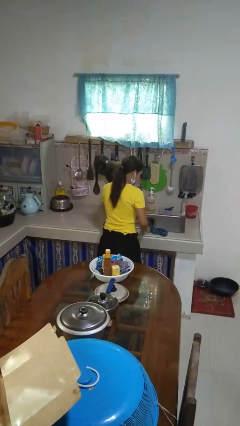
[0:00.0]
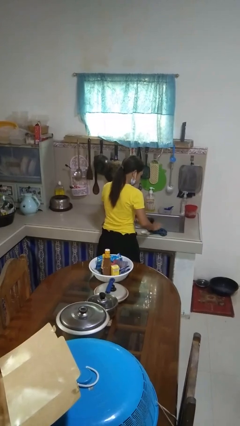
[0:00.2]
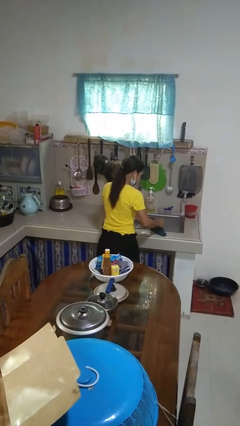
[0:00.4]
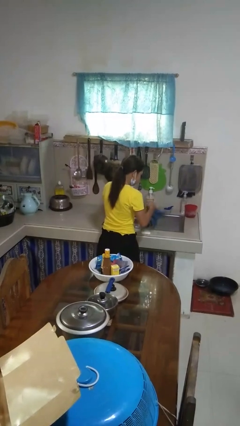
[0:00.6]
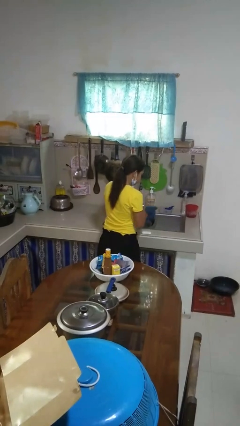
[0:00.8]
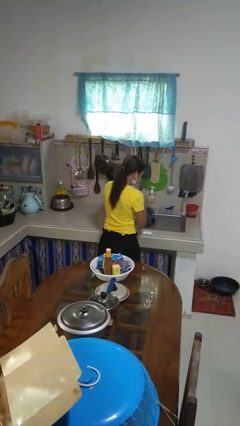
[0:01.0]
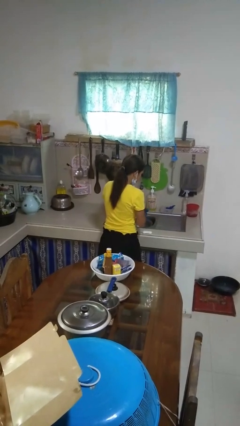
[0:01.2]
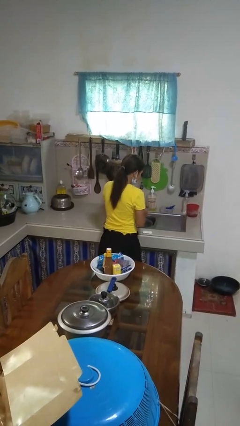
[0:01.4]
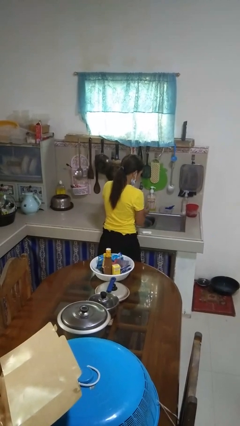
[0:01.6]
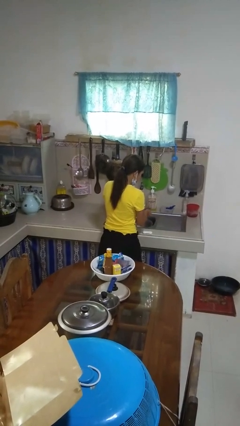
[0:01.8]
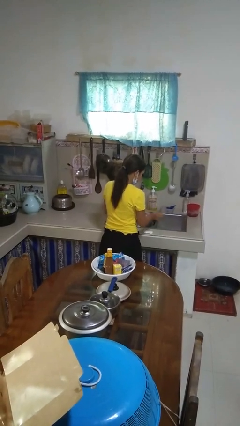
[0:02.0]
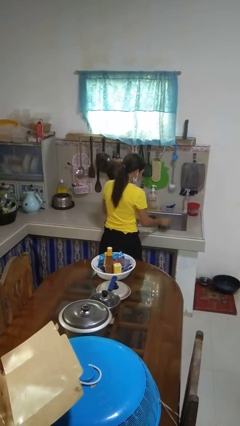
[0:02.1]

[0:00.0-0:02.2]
person dries hands with towel

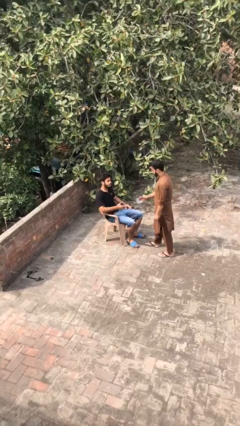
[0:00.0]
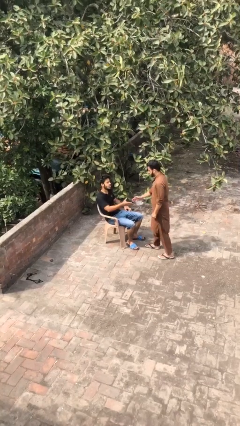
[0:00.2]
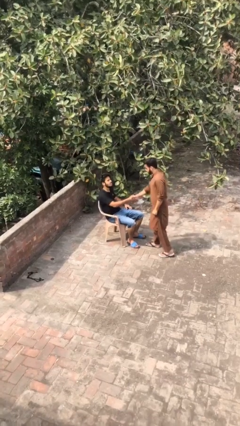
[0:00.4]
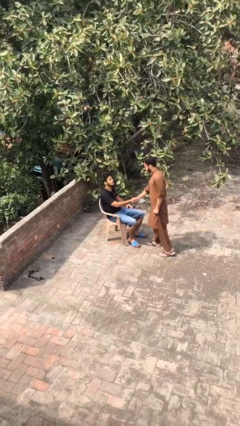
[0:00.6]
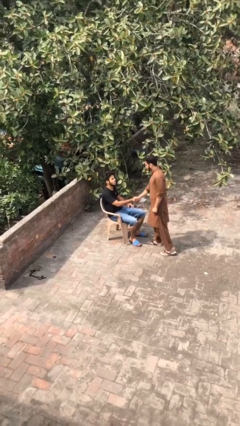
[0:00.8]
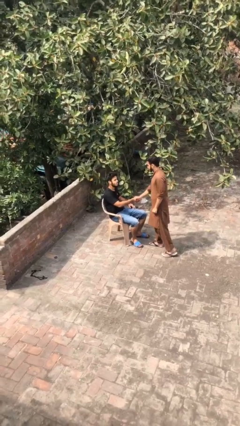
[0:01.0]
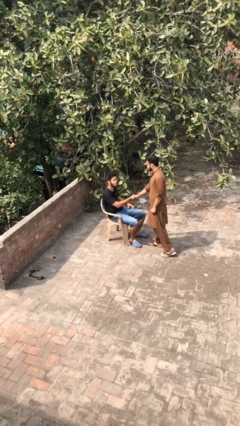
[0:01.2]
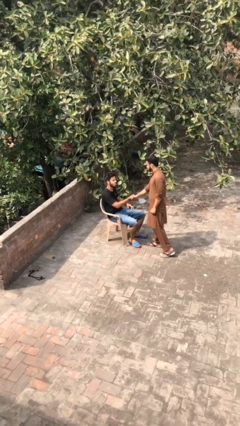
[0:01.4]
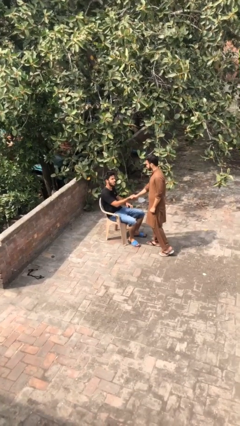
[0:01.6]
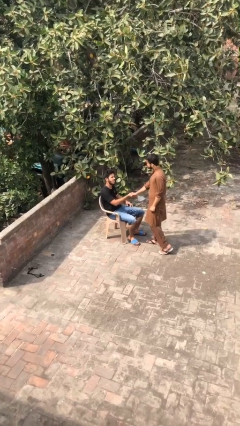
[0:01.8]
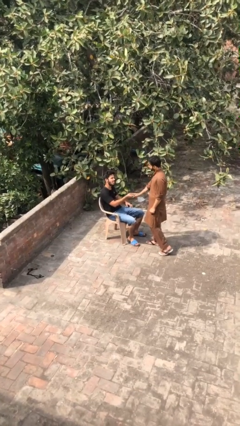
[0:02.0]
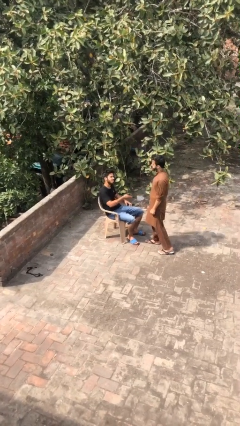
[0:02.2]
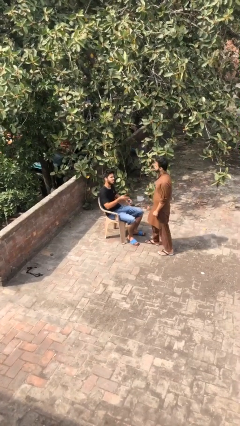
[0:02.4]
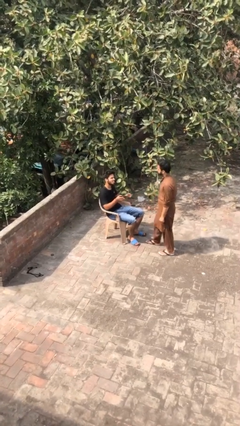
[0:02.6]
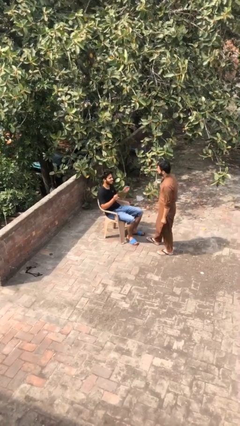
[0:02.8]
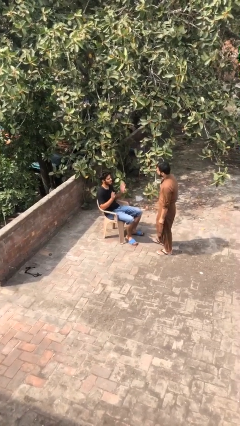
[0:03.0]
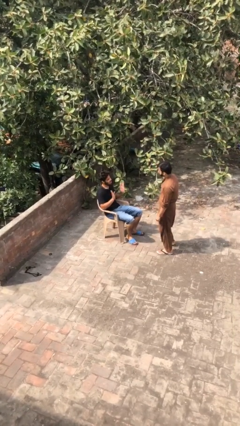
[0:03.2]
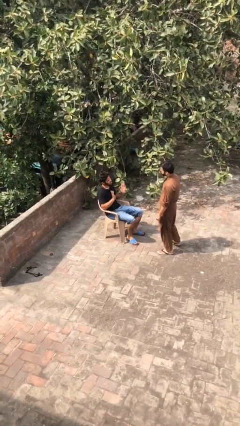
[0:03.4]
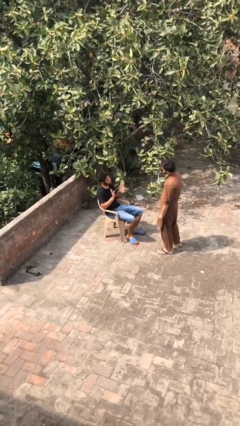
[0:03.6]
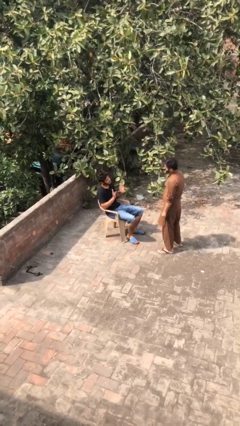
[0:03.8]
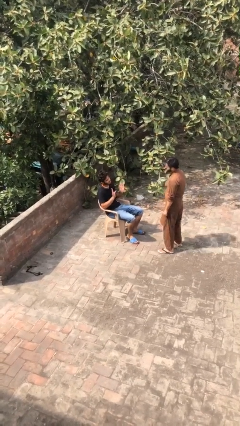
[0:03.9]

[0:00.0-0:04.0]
person shakes hand

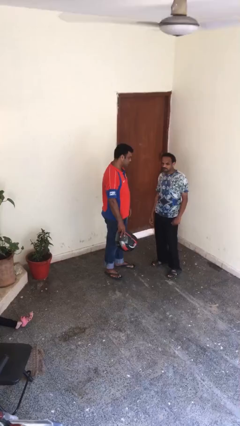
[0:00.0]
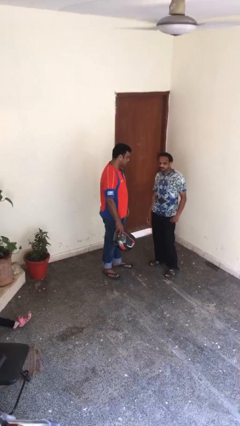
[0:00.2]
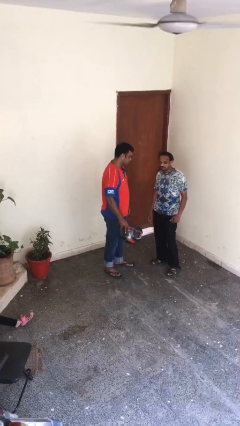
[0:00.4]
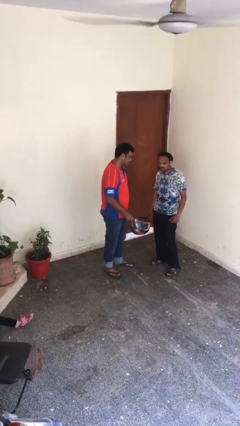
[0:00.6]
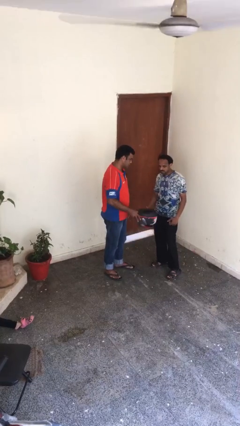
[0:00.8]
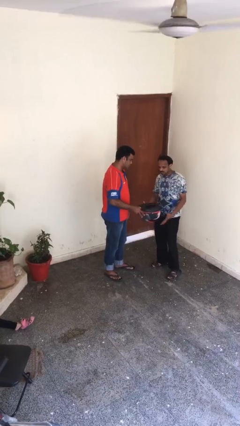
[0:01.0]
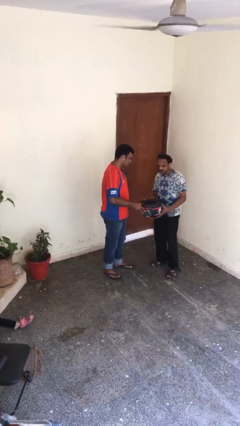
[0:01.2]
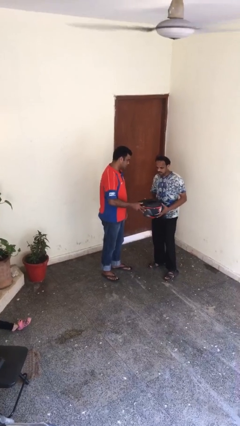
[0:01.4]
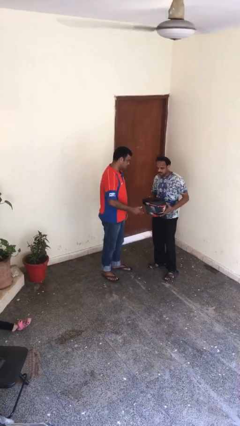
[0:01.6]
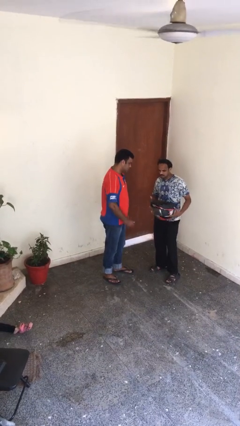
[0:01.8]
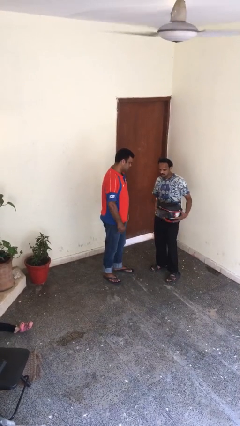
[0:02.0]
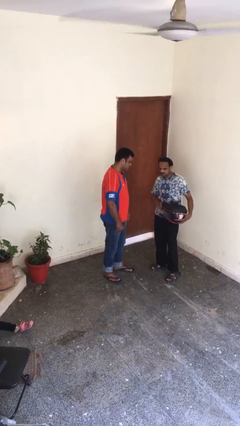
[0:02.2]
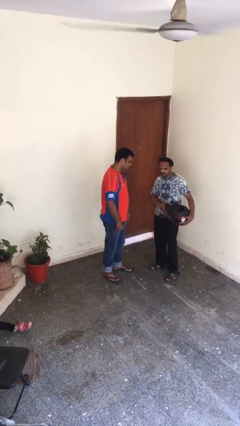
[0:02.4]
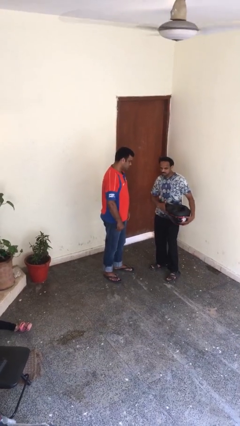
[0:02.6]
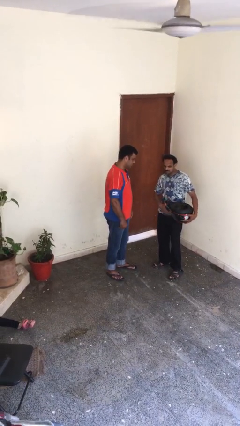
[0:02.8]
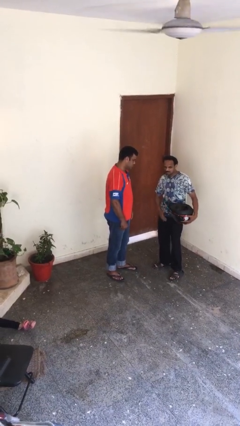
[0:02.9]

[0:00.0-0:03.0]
person transfers object to person

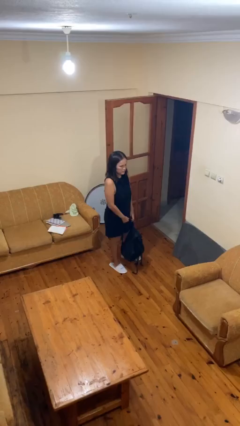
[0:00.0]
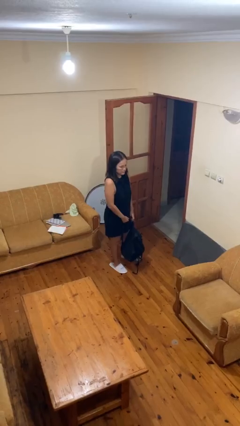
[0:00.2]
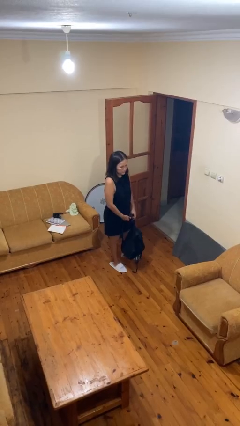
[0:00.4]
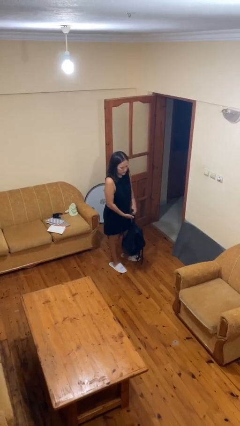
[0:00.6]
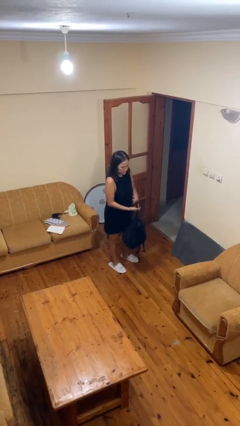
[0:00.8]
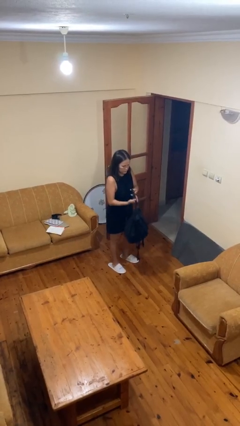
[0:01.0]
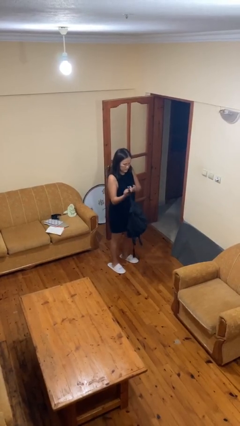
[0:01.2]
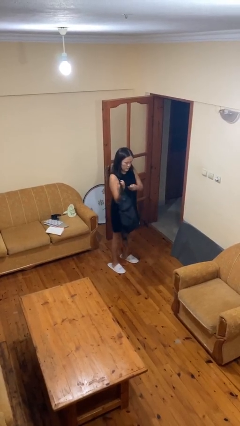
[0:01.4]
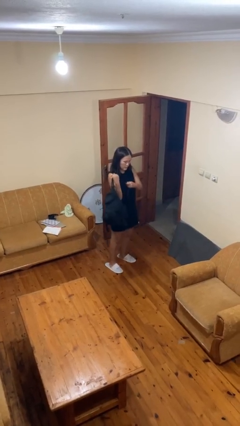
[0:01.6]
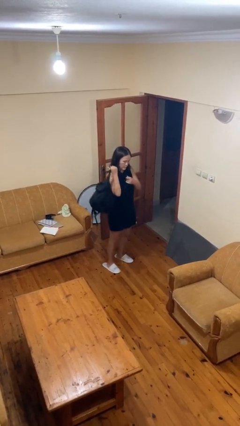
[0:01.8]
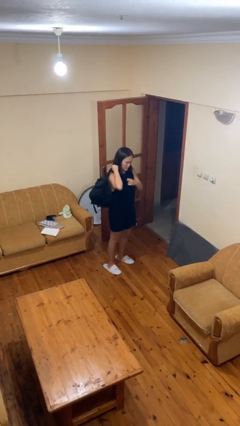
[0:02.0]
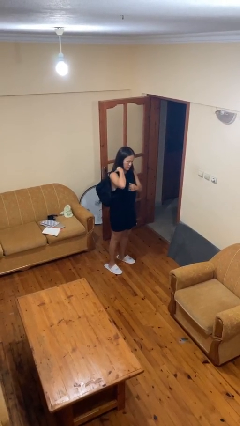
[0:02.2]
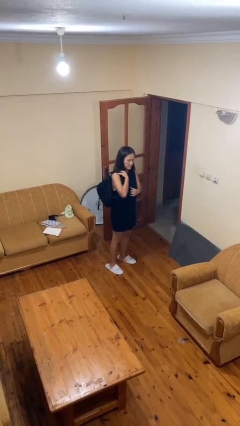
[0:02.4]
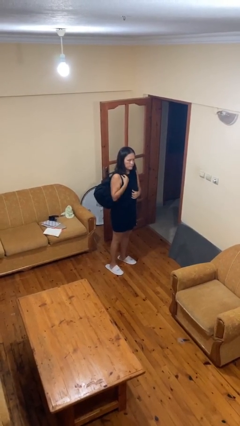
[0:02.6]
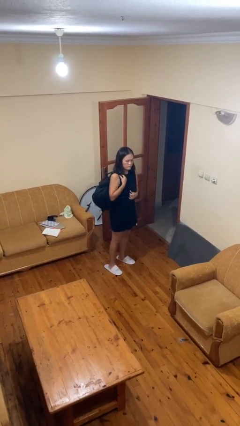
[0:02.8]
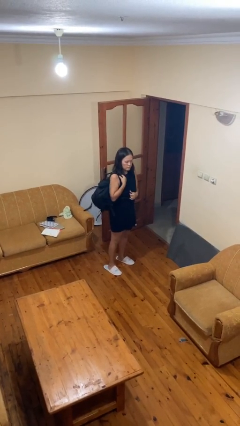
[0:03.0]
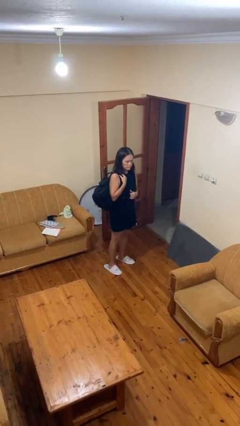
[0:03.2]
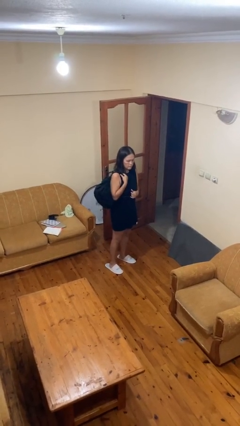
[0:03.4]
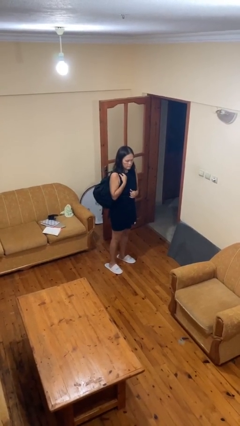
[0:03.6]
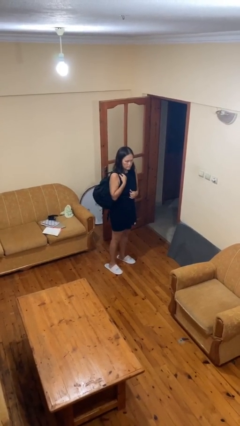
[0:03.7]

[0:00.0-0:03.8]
person puts on backpack

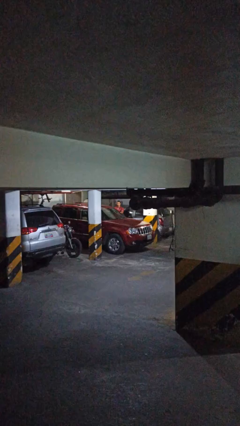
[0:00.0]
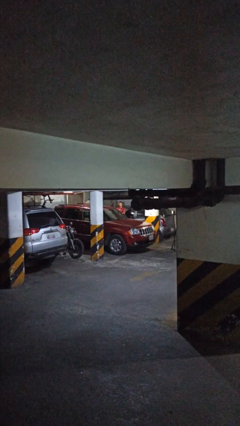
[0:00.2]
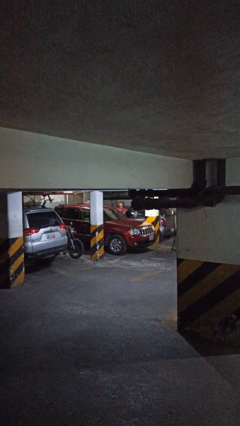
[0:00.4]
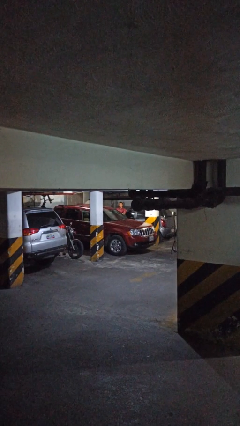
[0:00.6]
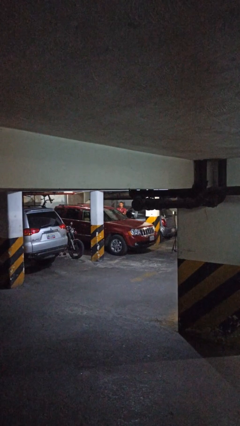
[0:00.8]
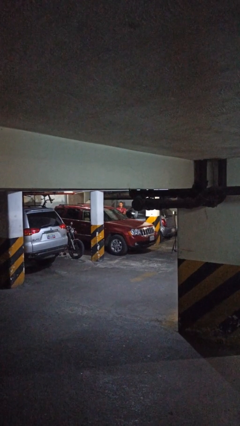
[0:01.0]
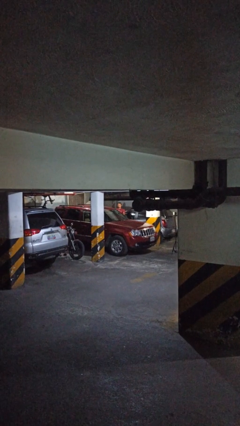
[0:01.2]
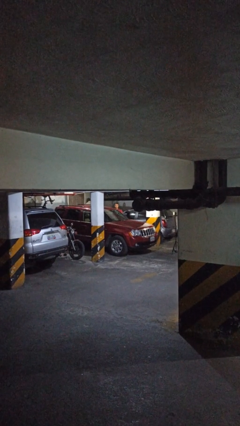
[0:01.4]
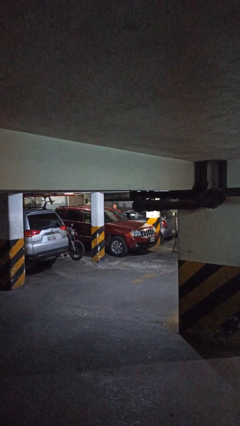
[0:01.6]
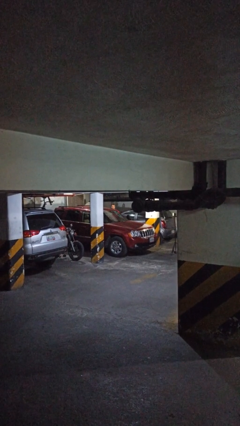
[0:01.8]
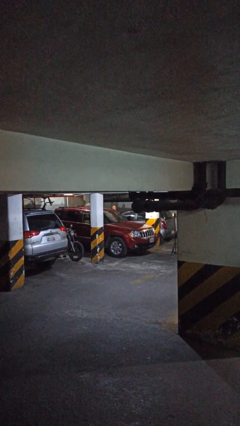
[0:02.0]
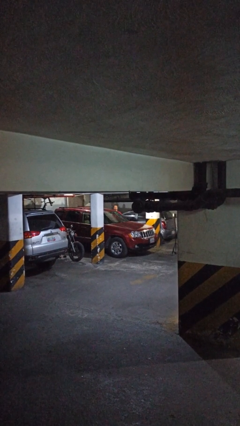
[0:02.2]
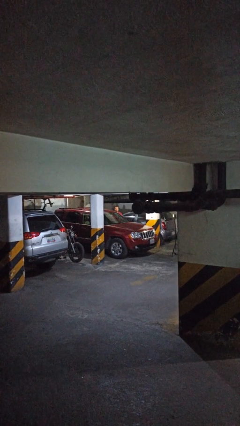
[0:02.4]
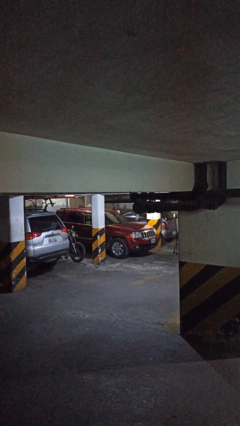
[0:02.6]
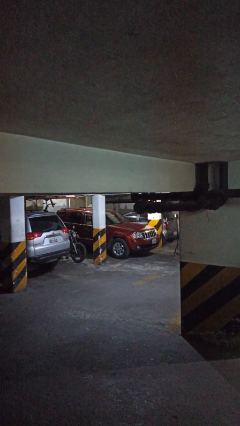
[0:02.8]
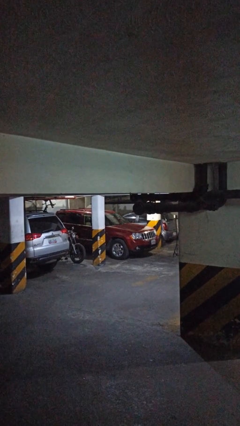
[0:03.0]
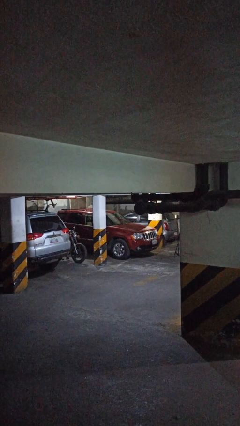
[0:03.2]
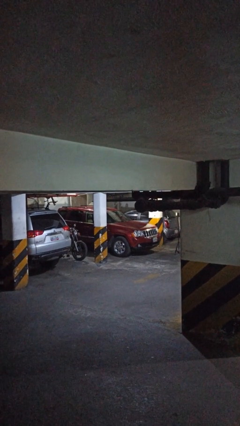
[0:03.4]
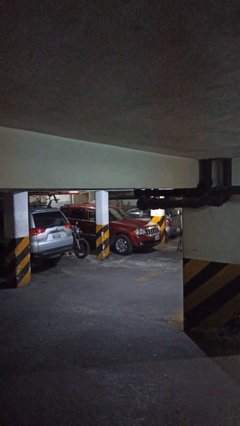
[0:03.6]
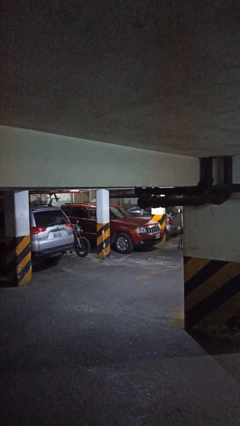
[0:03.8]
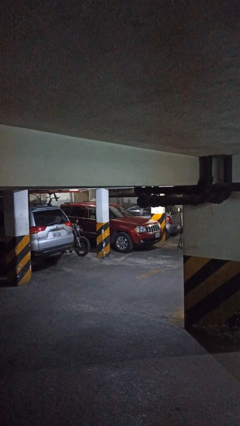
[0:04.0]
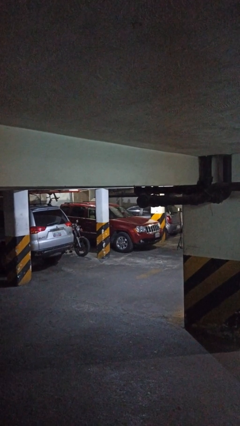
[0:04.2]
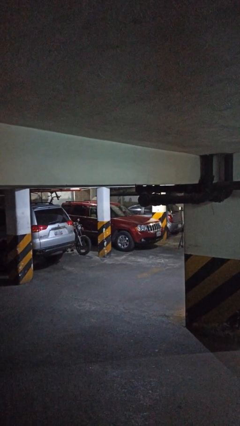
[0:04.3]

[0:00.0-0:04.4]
person enters car

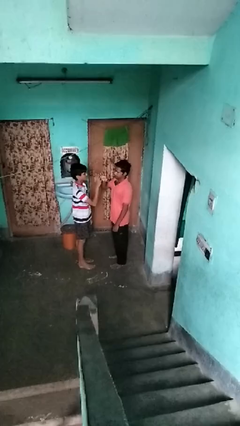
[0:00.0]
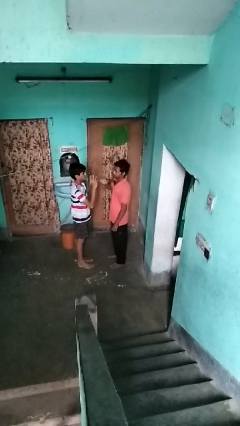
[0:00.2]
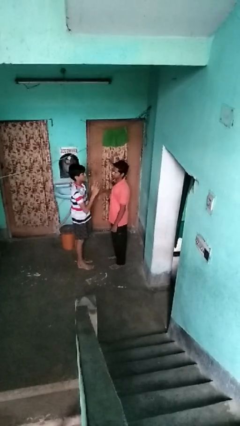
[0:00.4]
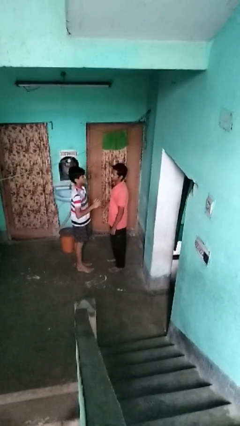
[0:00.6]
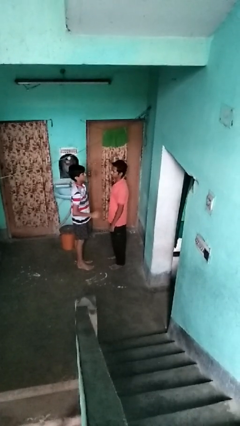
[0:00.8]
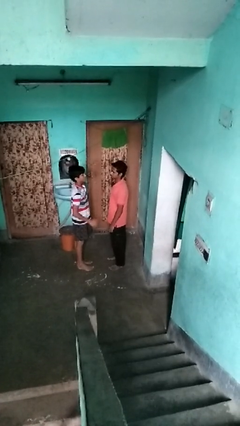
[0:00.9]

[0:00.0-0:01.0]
person highfives hand
